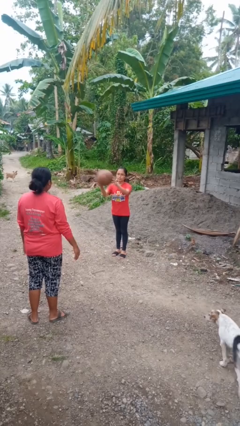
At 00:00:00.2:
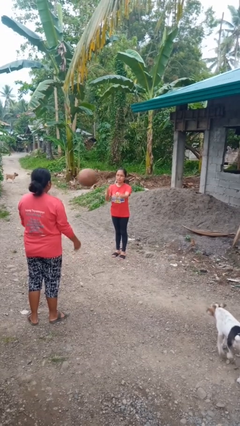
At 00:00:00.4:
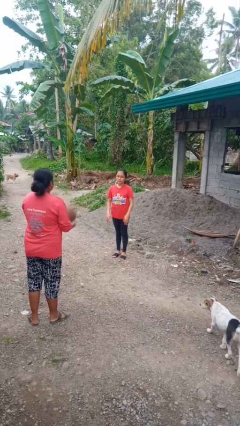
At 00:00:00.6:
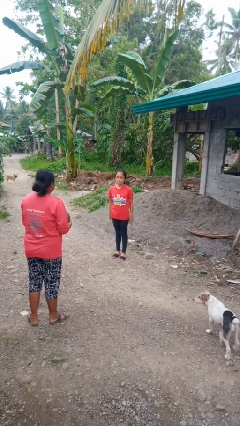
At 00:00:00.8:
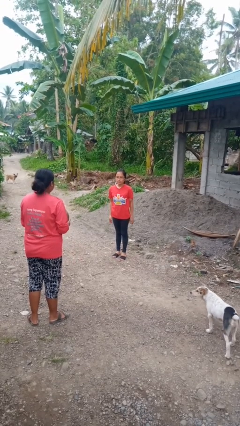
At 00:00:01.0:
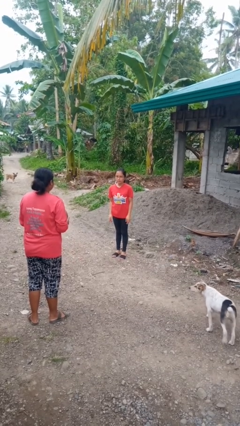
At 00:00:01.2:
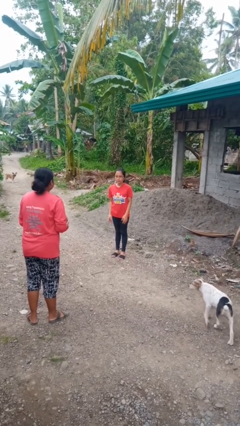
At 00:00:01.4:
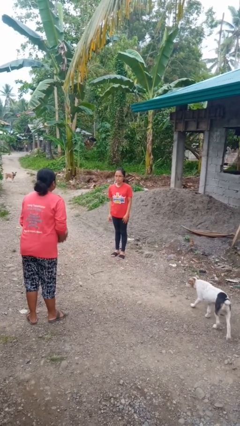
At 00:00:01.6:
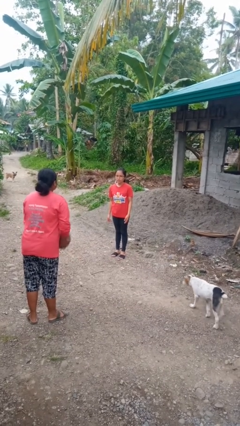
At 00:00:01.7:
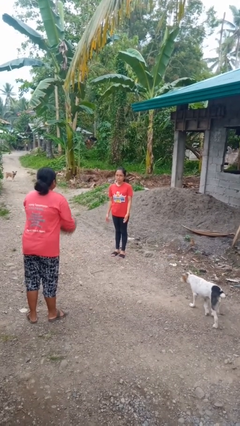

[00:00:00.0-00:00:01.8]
person throws object to person

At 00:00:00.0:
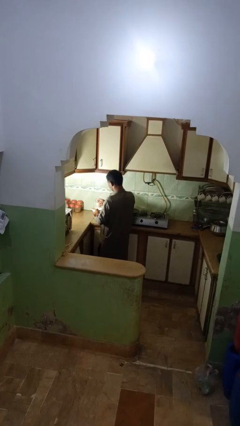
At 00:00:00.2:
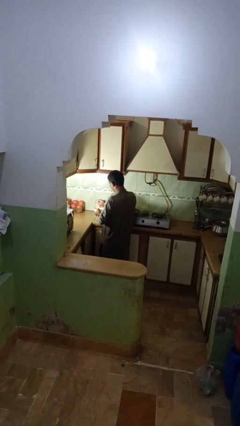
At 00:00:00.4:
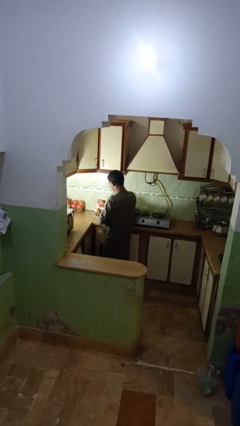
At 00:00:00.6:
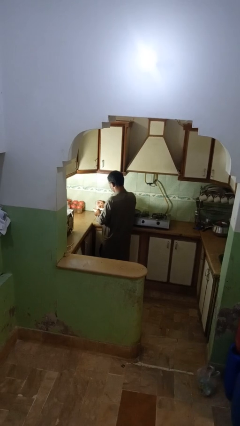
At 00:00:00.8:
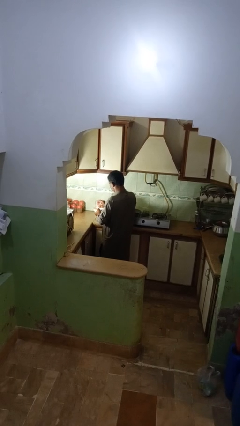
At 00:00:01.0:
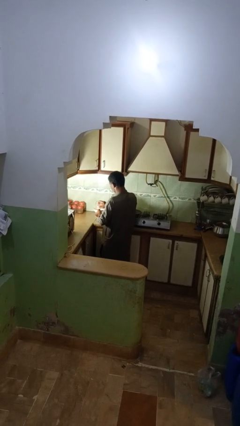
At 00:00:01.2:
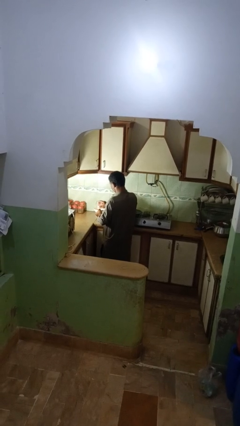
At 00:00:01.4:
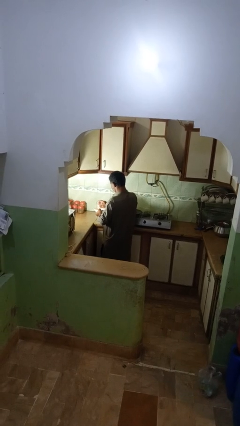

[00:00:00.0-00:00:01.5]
person pours into bowl

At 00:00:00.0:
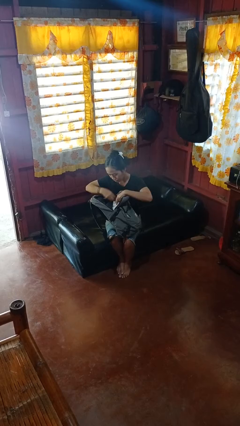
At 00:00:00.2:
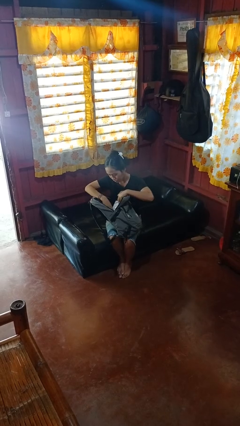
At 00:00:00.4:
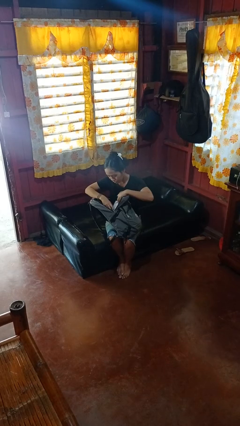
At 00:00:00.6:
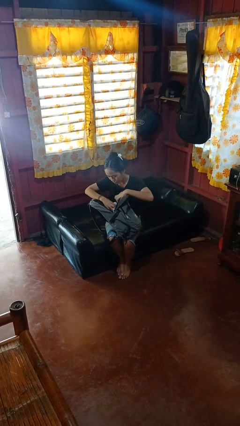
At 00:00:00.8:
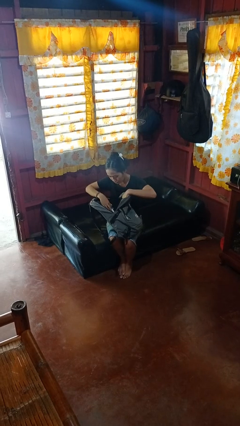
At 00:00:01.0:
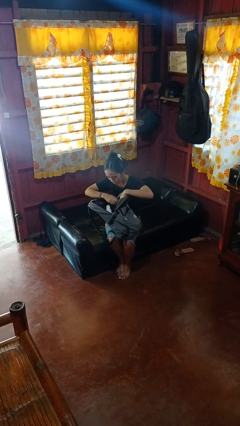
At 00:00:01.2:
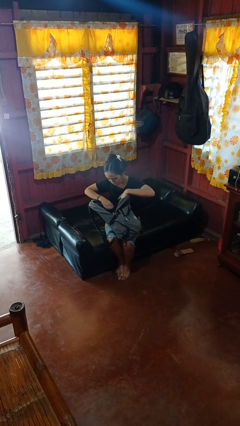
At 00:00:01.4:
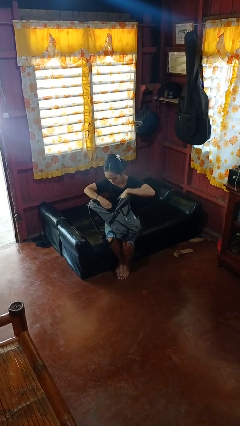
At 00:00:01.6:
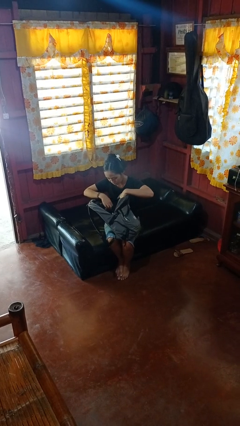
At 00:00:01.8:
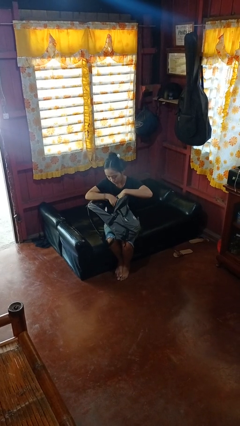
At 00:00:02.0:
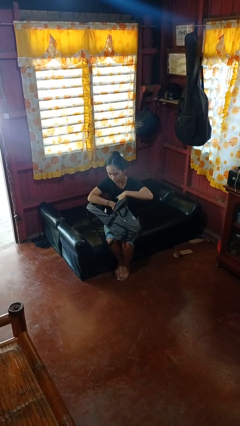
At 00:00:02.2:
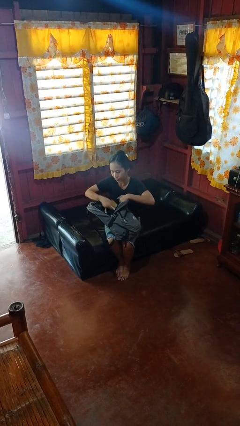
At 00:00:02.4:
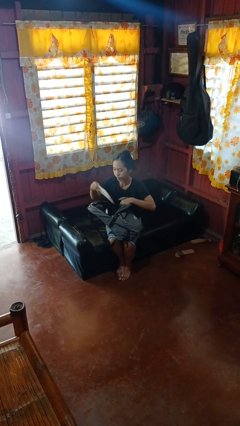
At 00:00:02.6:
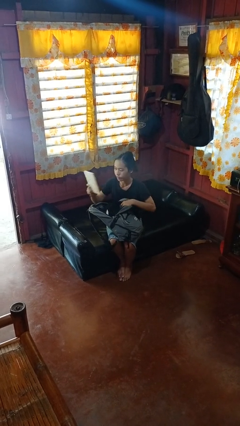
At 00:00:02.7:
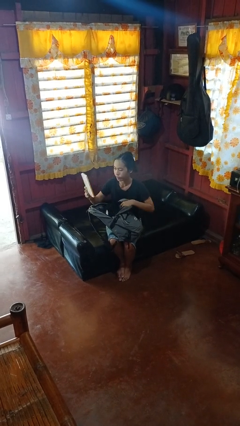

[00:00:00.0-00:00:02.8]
person searches in backpack

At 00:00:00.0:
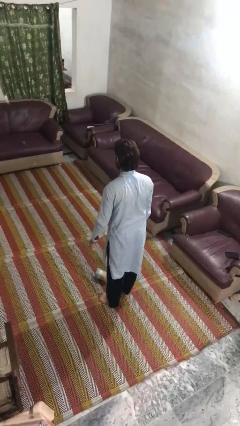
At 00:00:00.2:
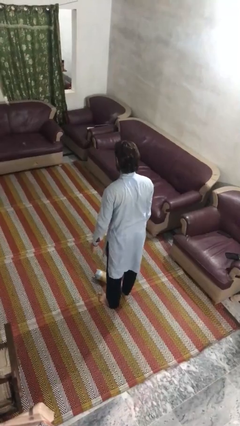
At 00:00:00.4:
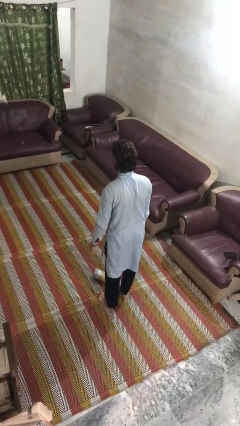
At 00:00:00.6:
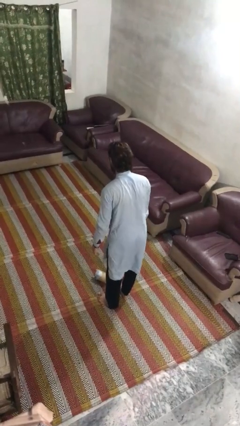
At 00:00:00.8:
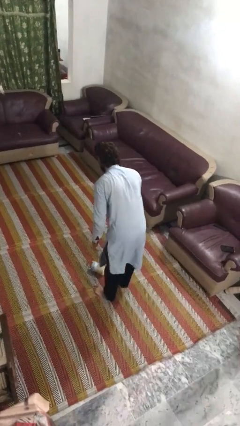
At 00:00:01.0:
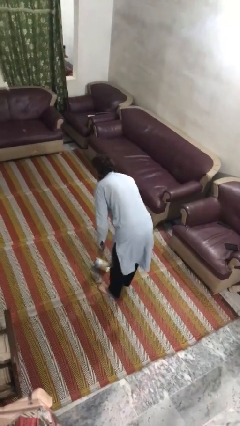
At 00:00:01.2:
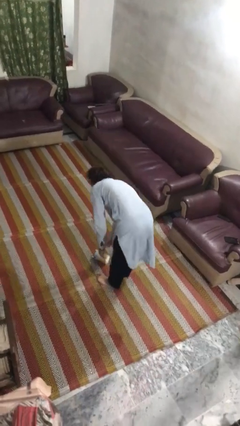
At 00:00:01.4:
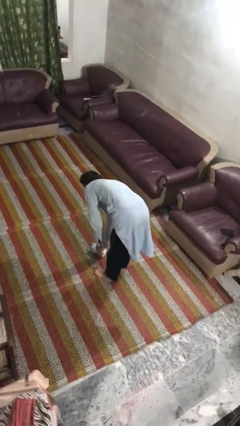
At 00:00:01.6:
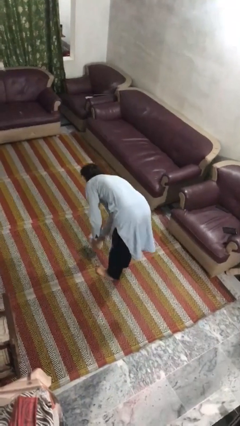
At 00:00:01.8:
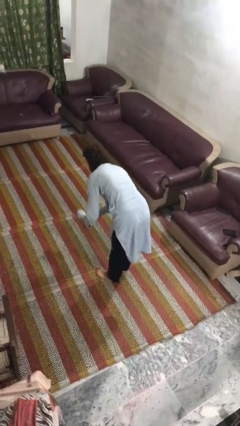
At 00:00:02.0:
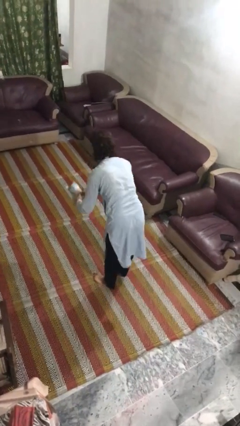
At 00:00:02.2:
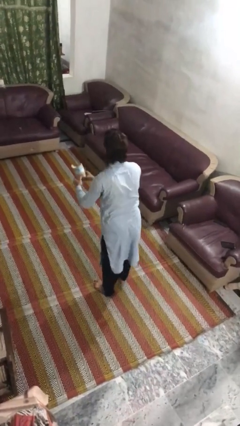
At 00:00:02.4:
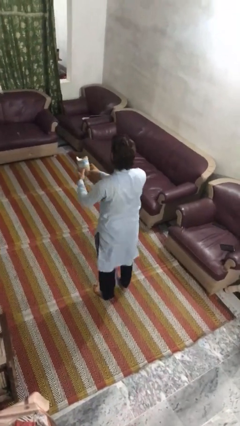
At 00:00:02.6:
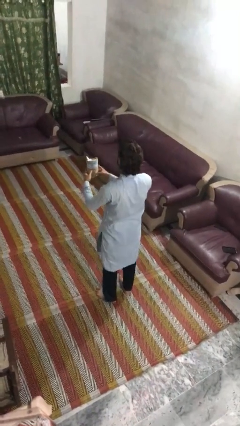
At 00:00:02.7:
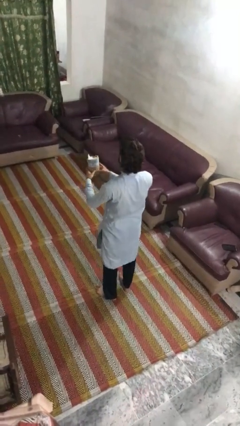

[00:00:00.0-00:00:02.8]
person picks up object from floor

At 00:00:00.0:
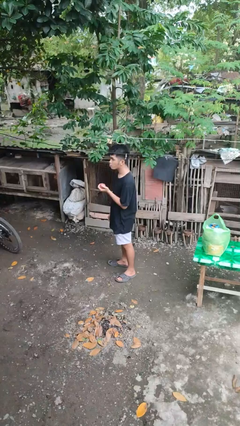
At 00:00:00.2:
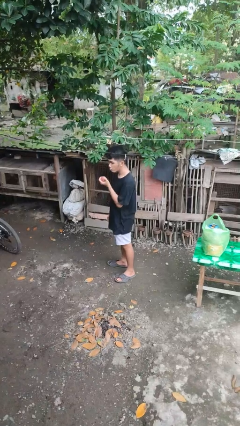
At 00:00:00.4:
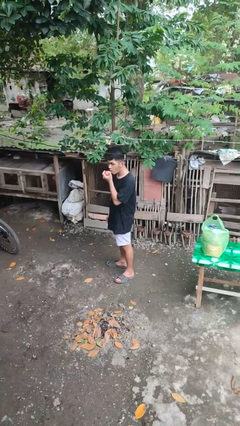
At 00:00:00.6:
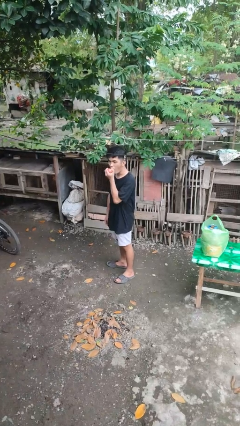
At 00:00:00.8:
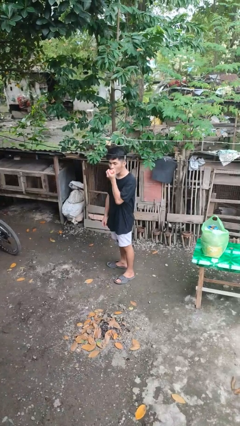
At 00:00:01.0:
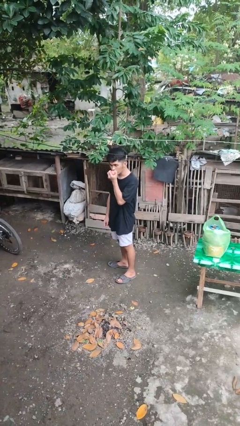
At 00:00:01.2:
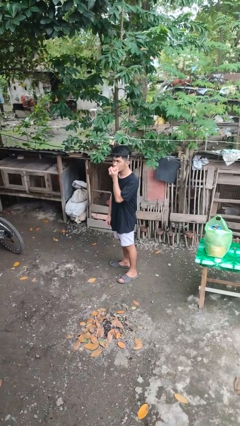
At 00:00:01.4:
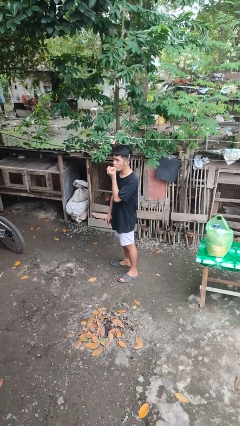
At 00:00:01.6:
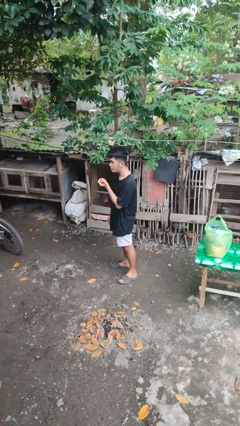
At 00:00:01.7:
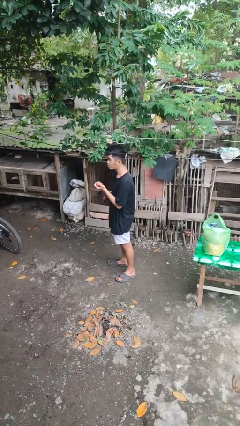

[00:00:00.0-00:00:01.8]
person eats apple

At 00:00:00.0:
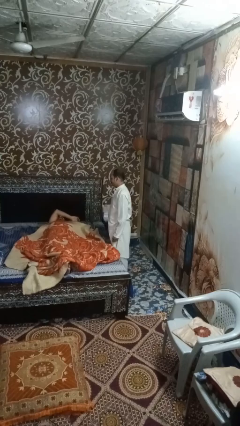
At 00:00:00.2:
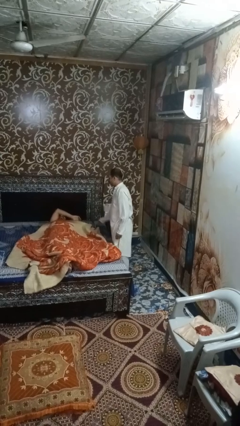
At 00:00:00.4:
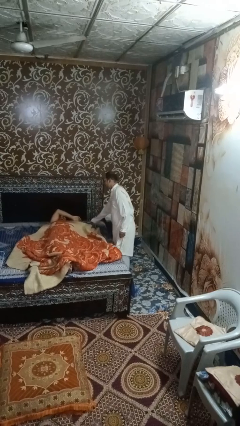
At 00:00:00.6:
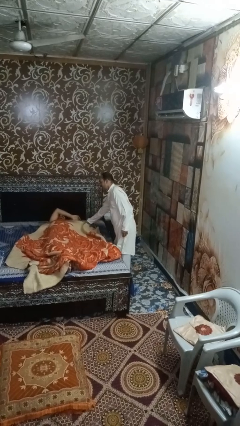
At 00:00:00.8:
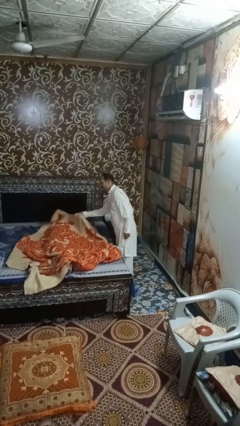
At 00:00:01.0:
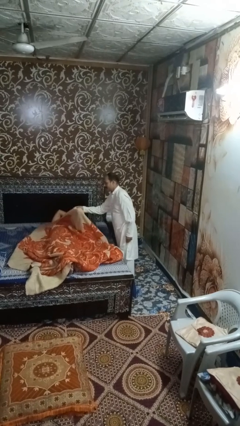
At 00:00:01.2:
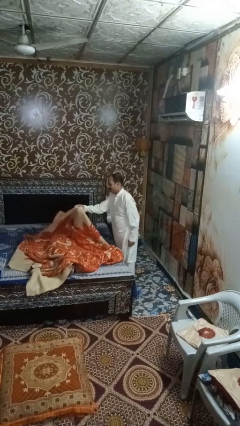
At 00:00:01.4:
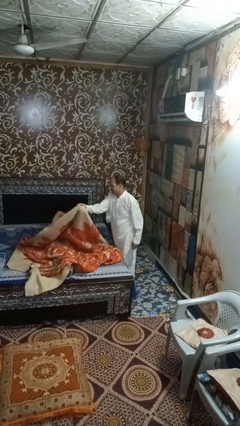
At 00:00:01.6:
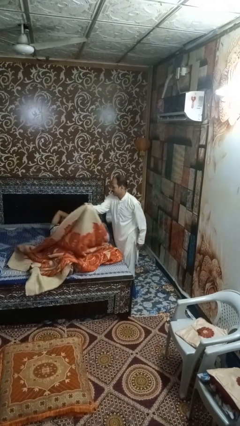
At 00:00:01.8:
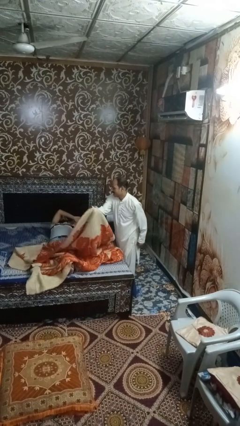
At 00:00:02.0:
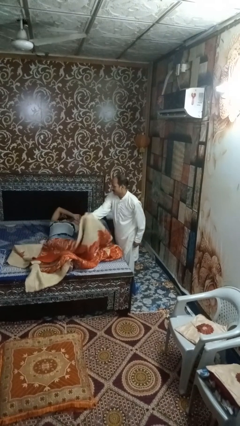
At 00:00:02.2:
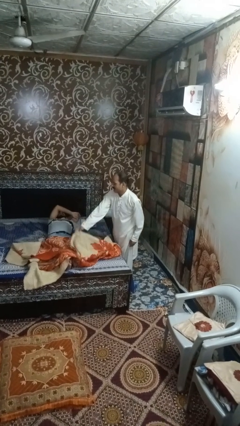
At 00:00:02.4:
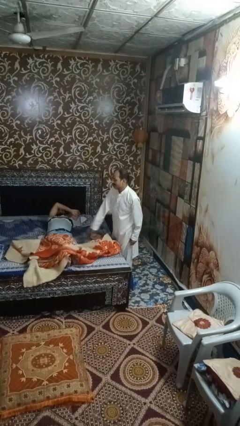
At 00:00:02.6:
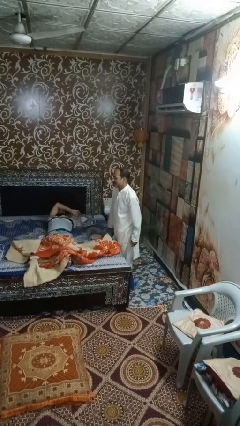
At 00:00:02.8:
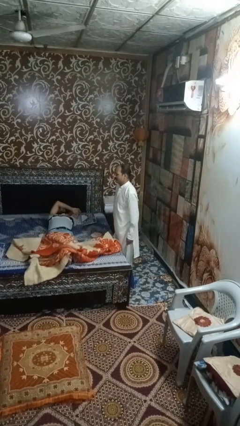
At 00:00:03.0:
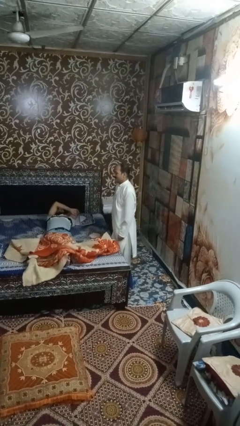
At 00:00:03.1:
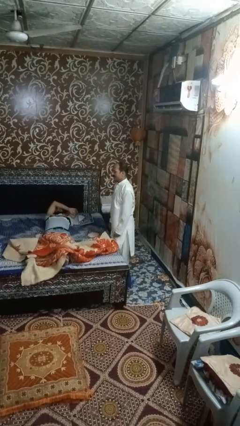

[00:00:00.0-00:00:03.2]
person uncovers friend with blanket

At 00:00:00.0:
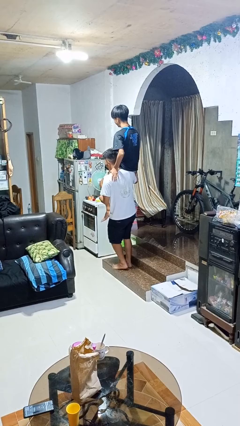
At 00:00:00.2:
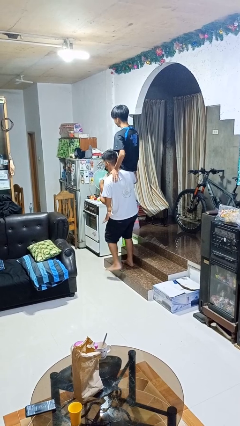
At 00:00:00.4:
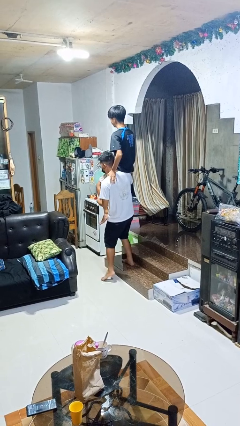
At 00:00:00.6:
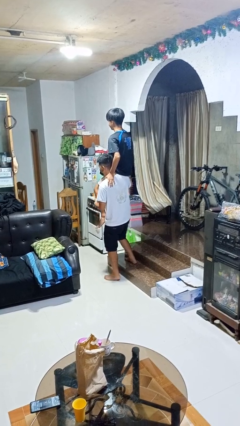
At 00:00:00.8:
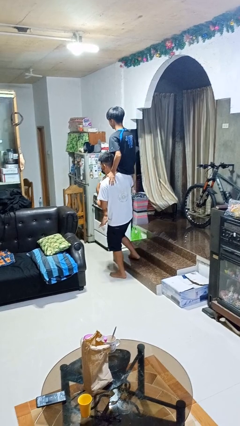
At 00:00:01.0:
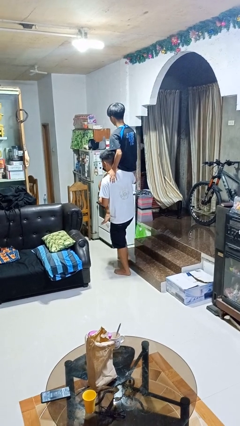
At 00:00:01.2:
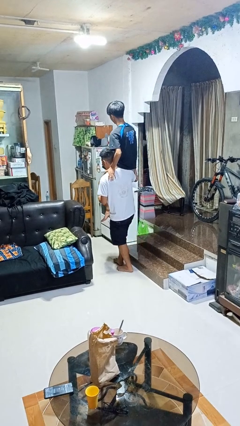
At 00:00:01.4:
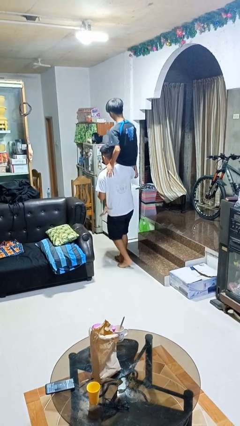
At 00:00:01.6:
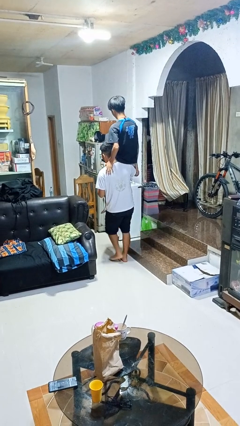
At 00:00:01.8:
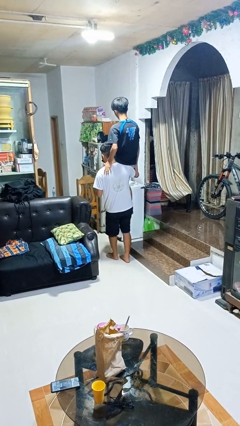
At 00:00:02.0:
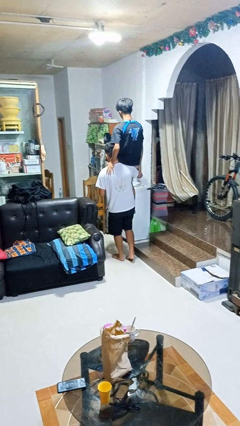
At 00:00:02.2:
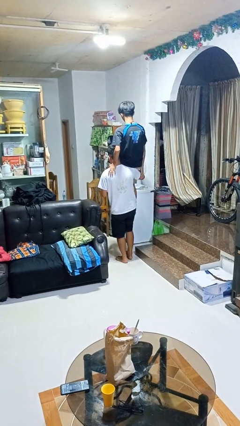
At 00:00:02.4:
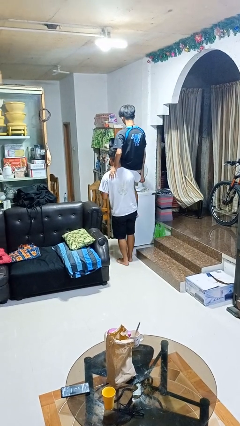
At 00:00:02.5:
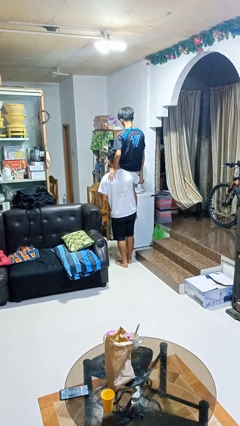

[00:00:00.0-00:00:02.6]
person carries person on shoulders
